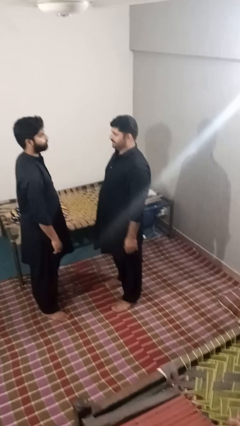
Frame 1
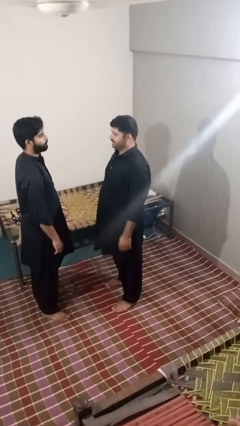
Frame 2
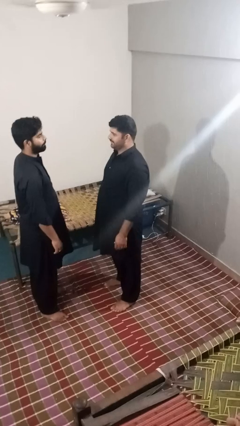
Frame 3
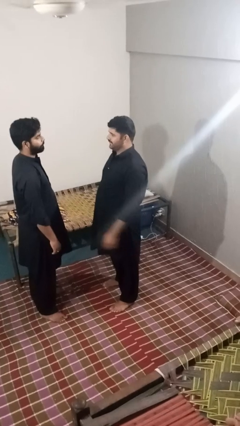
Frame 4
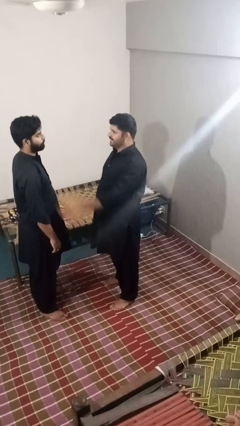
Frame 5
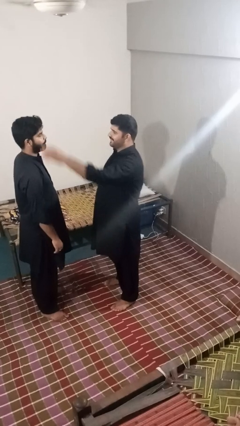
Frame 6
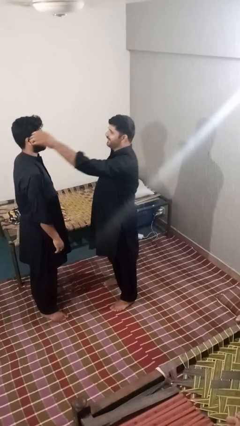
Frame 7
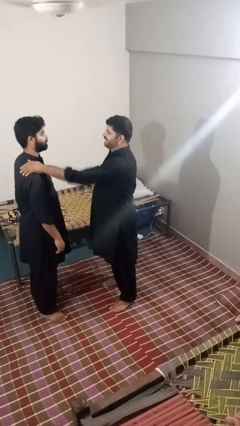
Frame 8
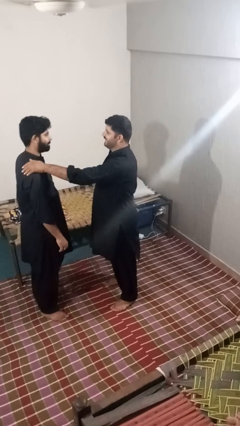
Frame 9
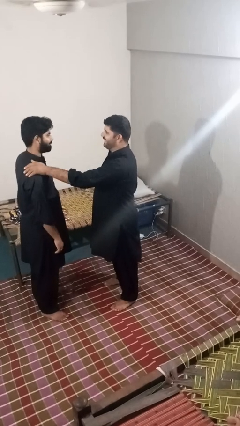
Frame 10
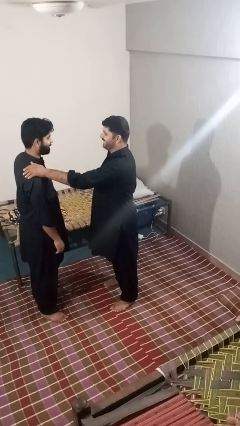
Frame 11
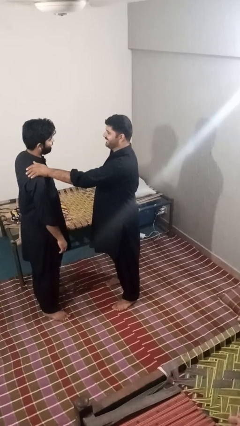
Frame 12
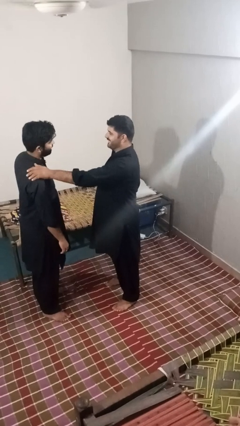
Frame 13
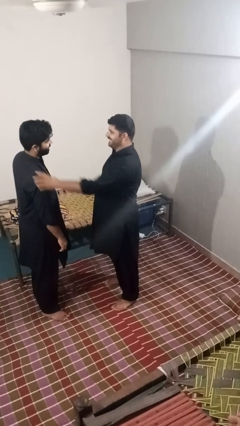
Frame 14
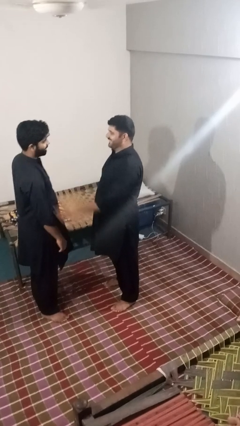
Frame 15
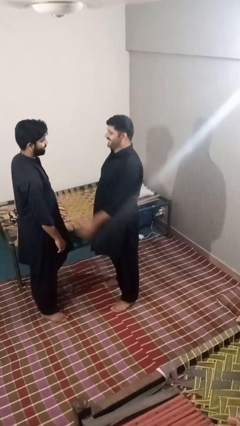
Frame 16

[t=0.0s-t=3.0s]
person pounds shoulders of person

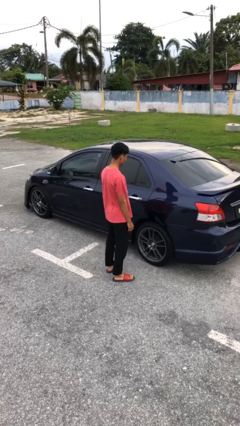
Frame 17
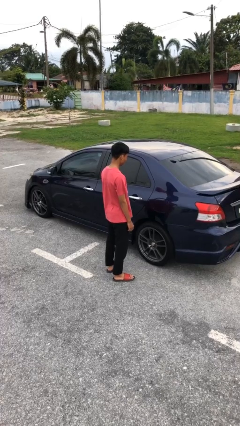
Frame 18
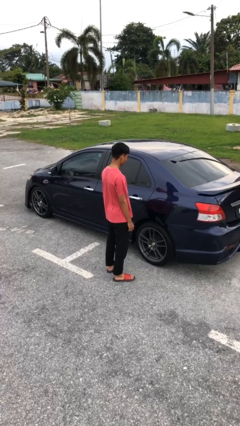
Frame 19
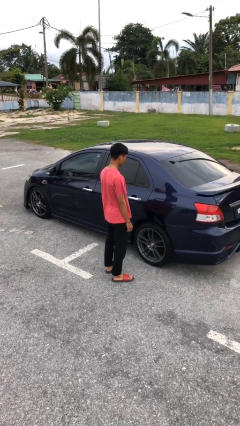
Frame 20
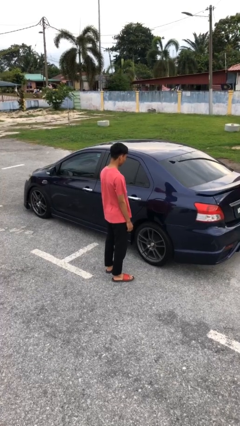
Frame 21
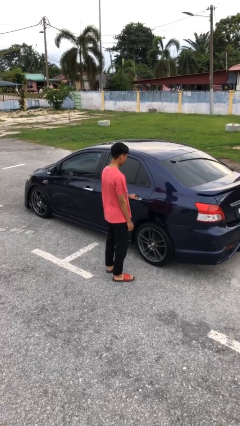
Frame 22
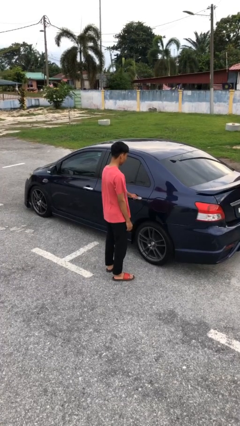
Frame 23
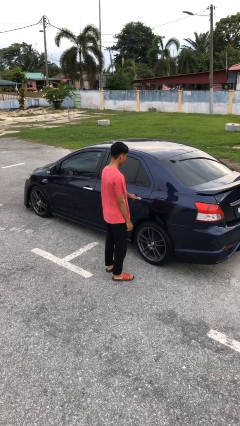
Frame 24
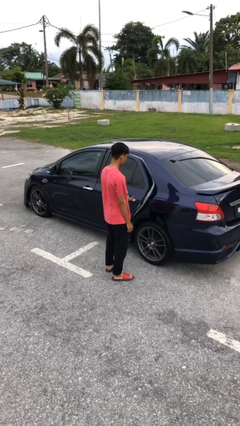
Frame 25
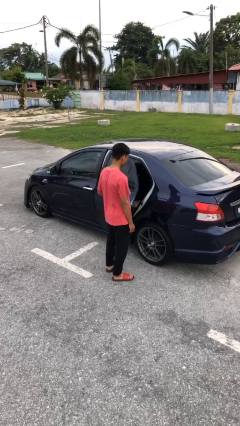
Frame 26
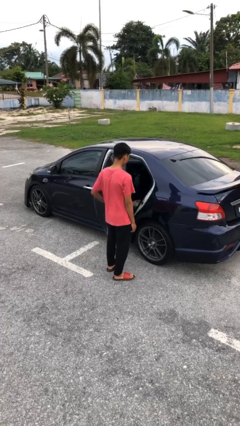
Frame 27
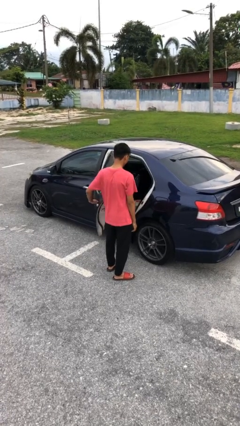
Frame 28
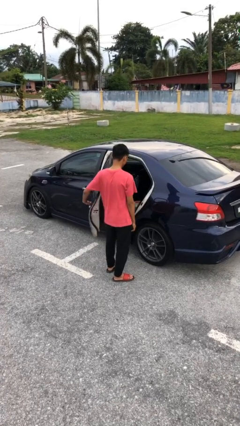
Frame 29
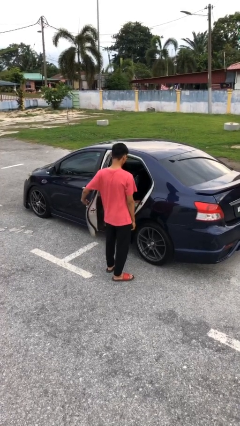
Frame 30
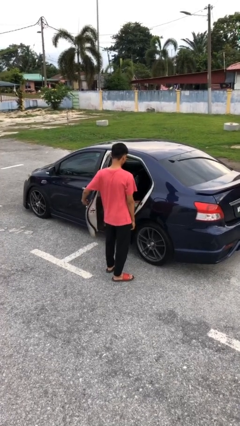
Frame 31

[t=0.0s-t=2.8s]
person opens car door

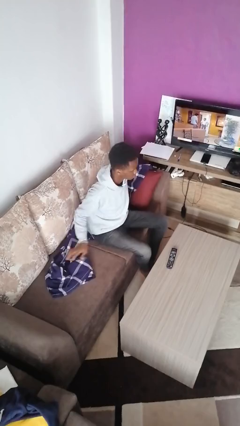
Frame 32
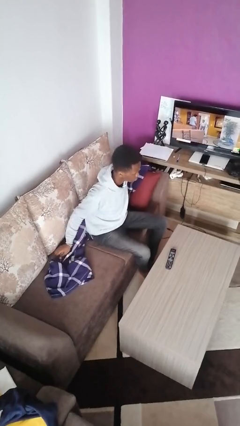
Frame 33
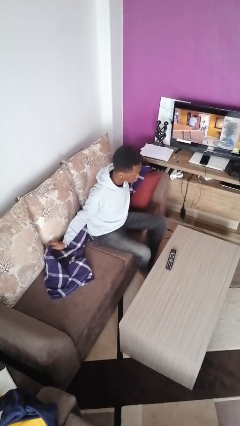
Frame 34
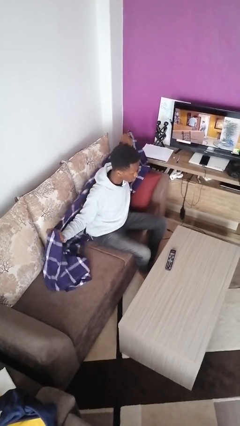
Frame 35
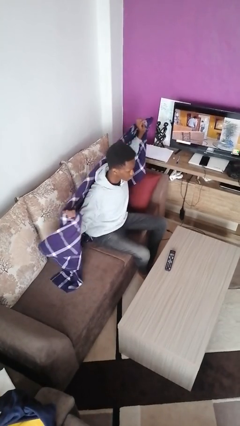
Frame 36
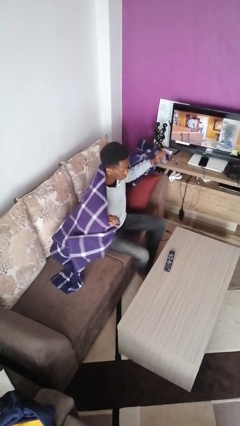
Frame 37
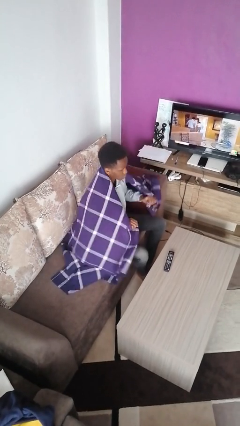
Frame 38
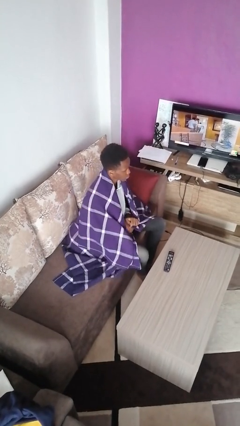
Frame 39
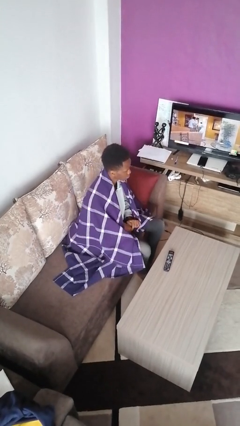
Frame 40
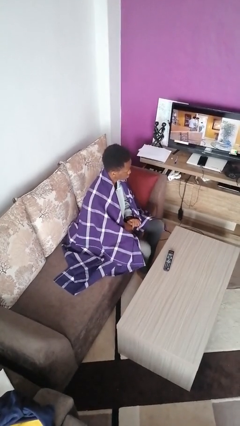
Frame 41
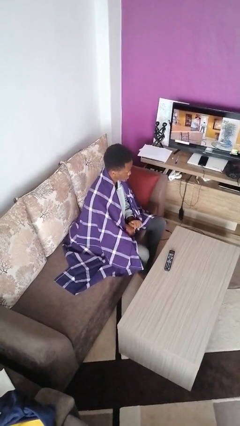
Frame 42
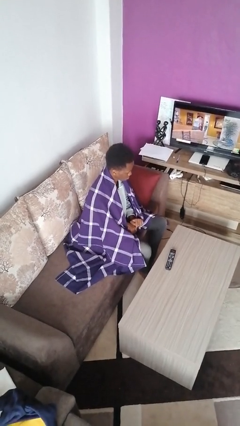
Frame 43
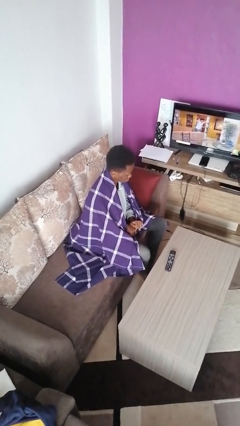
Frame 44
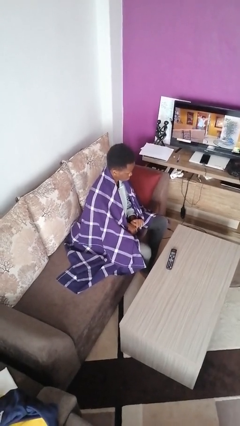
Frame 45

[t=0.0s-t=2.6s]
person covers with blanket

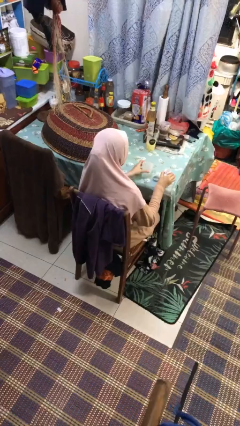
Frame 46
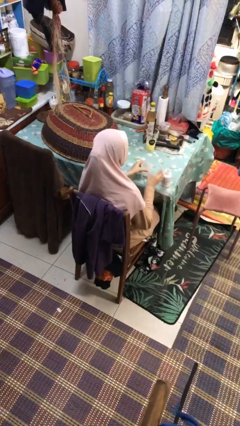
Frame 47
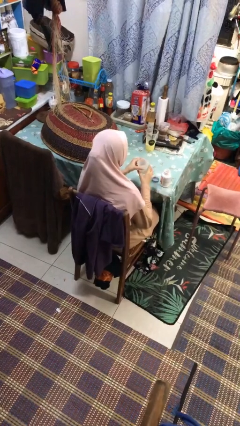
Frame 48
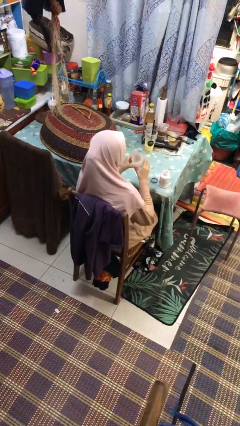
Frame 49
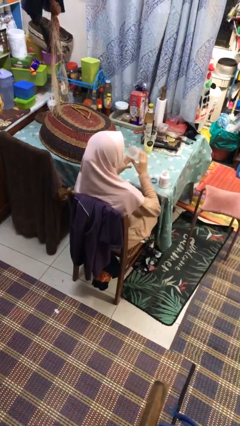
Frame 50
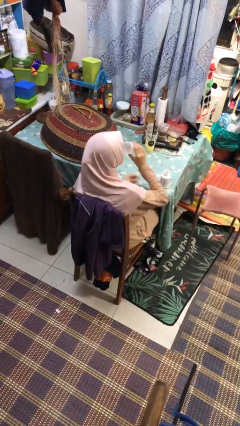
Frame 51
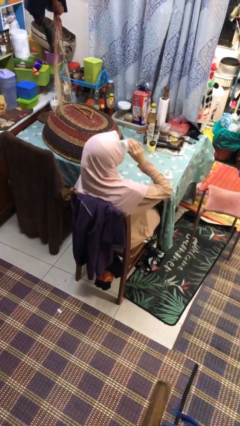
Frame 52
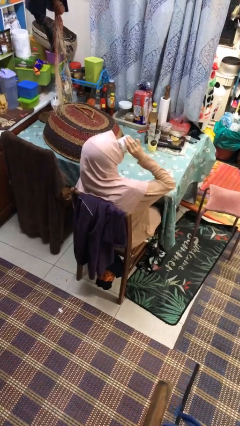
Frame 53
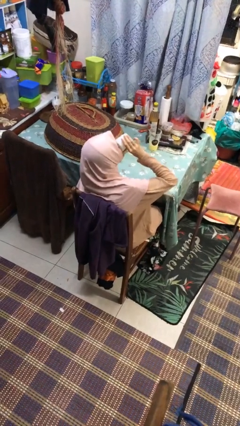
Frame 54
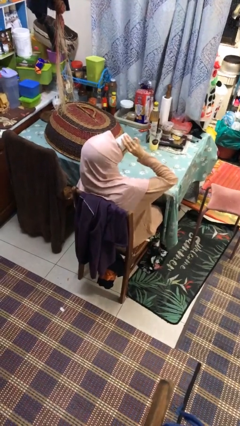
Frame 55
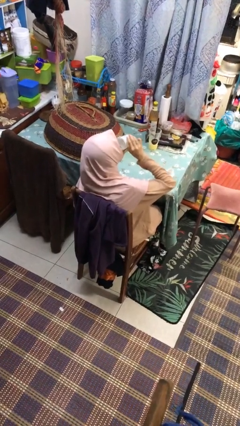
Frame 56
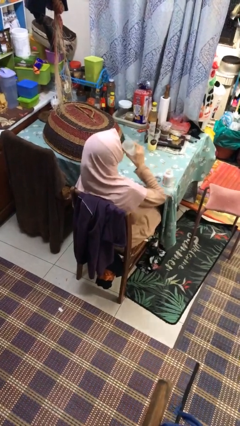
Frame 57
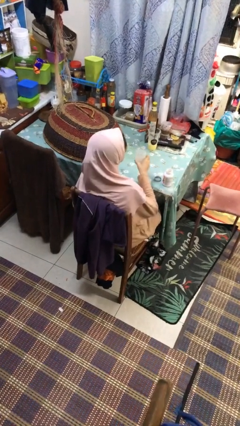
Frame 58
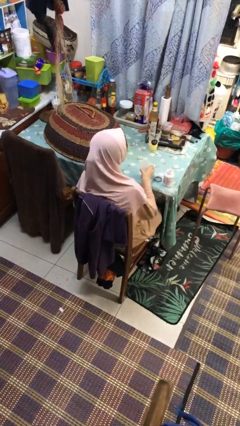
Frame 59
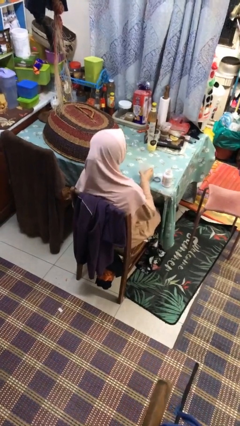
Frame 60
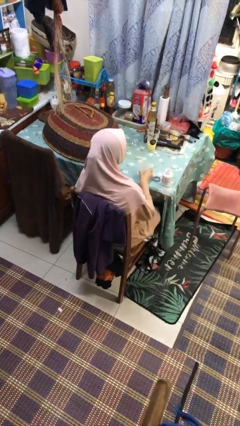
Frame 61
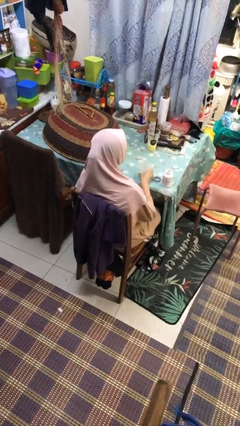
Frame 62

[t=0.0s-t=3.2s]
person drinks from cup

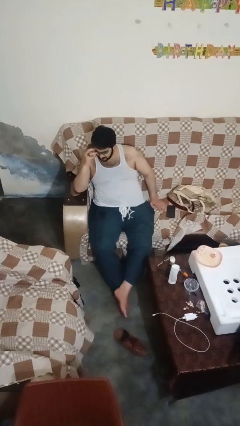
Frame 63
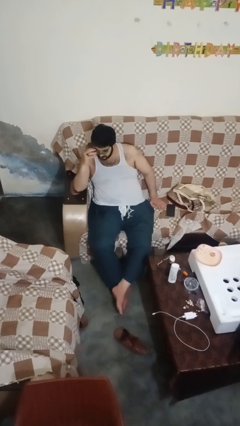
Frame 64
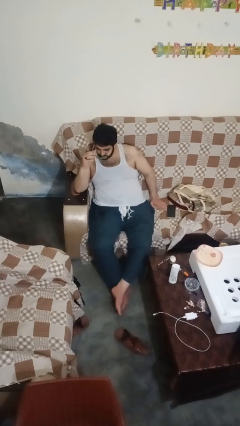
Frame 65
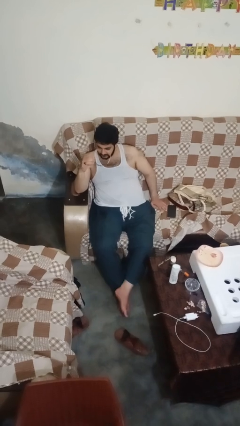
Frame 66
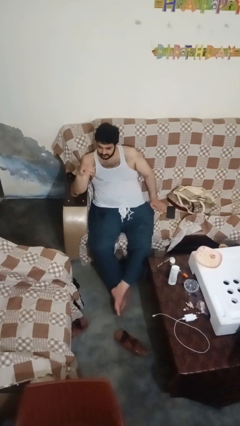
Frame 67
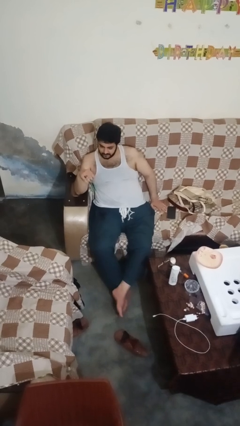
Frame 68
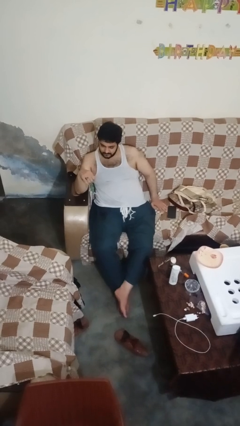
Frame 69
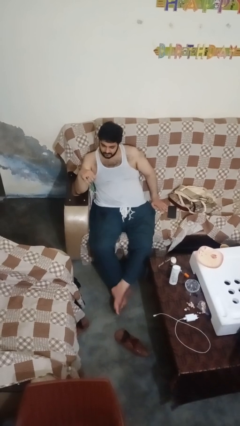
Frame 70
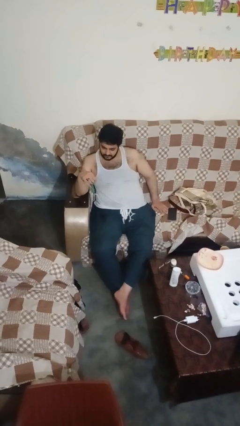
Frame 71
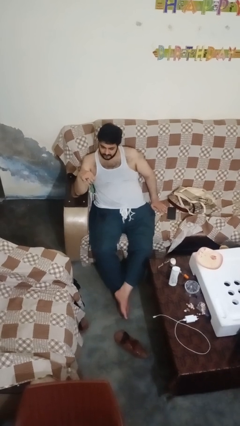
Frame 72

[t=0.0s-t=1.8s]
person takes off sunglasses

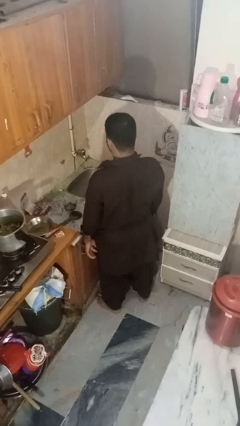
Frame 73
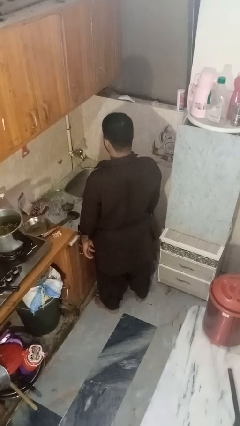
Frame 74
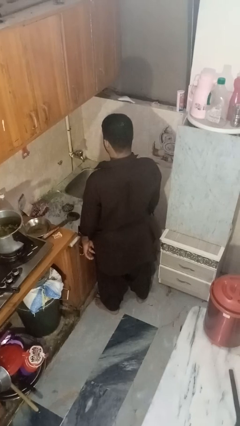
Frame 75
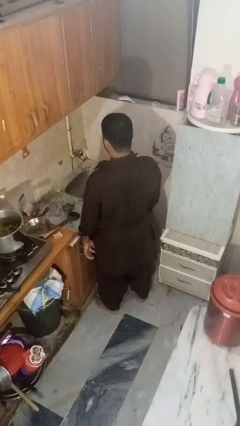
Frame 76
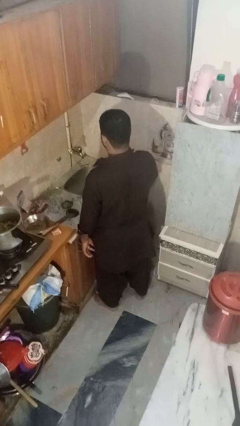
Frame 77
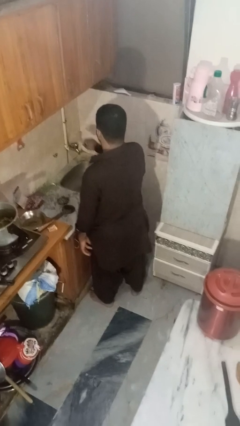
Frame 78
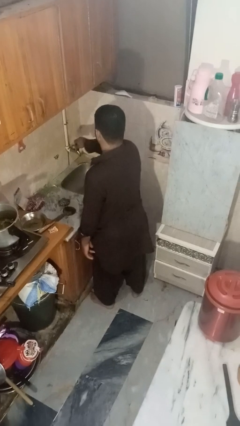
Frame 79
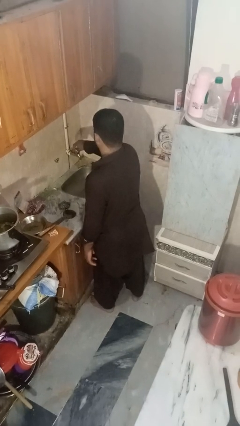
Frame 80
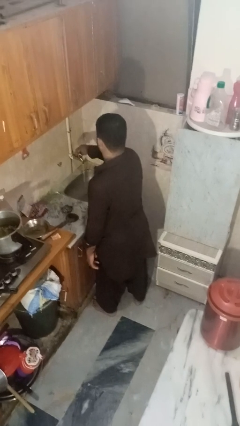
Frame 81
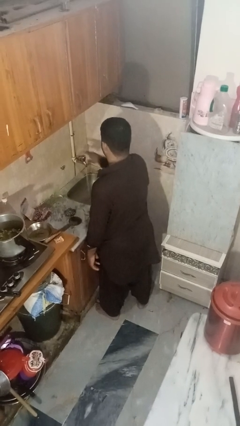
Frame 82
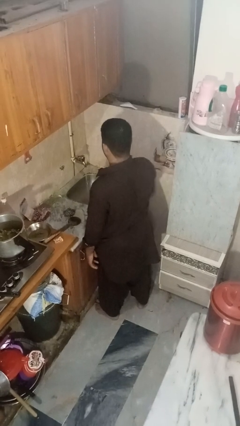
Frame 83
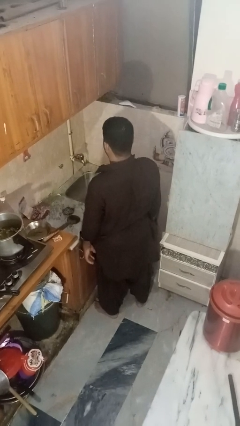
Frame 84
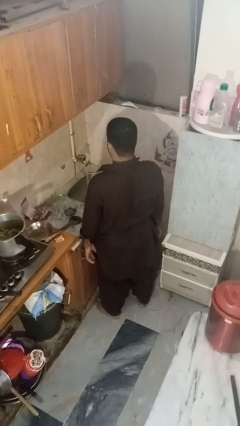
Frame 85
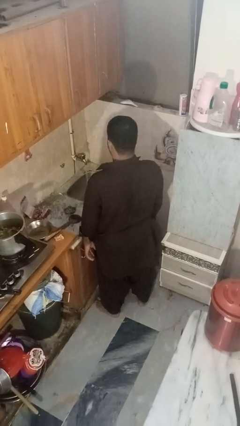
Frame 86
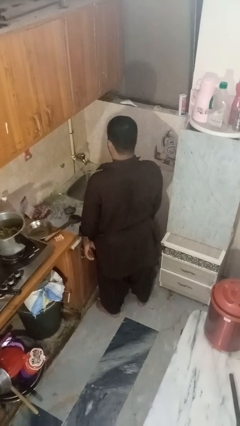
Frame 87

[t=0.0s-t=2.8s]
person turns on faucet

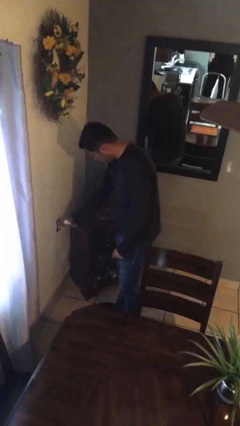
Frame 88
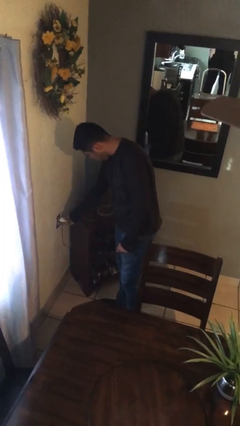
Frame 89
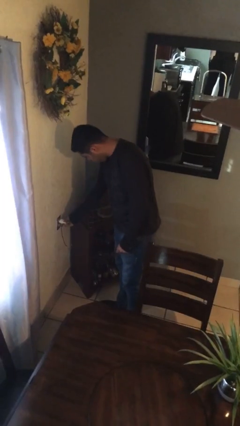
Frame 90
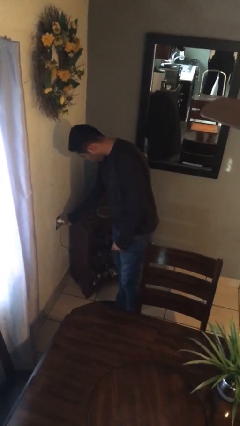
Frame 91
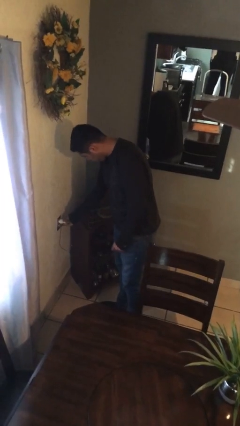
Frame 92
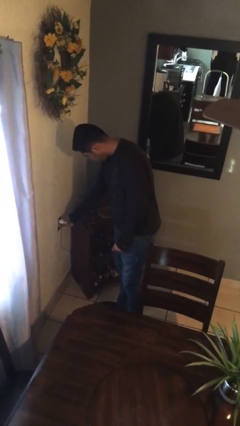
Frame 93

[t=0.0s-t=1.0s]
person pushes wheeled trashcan
